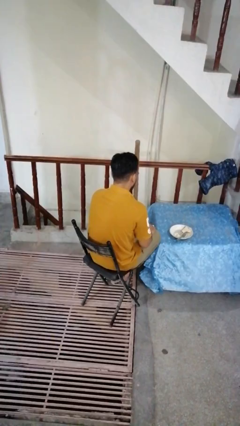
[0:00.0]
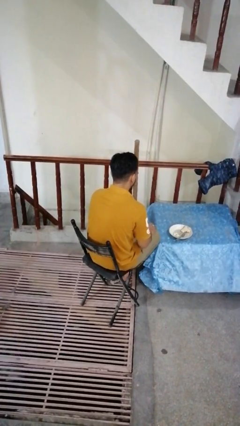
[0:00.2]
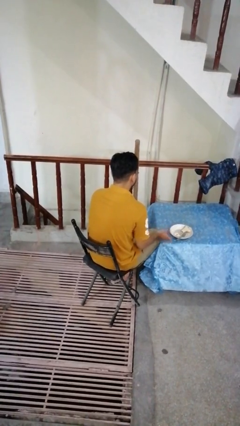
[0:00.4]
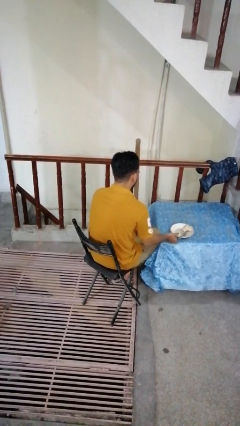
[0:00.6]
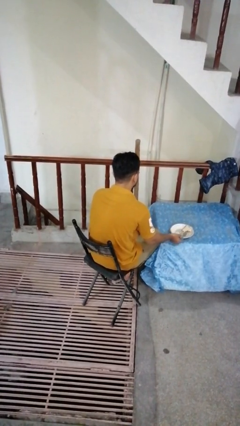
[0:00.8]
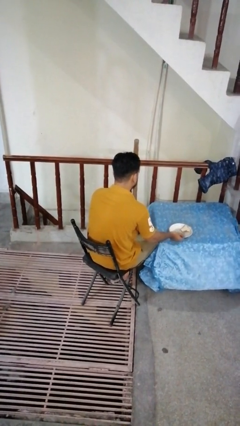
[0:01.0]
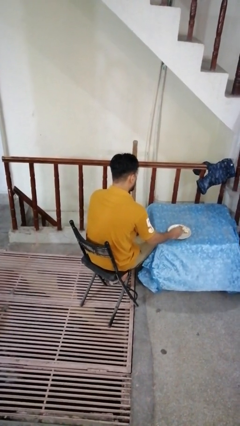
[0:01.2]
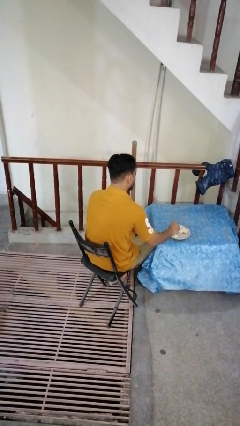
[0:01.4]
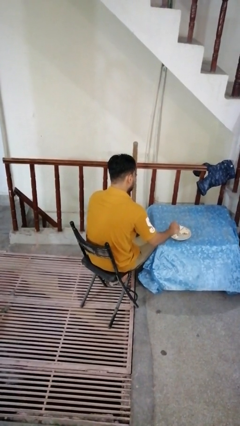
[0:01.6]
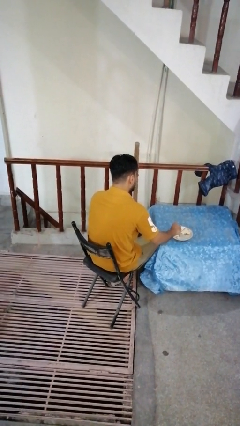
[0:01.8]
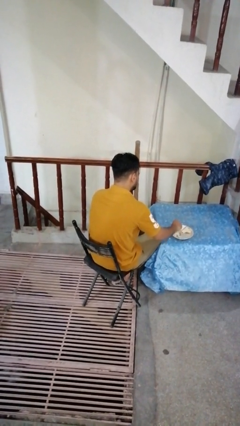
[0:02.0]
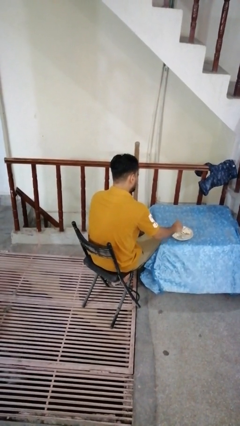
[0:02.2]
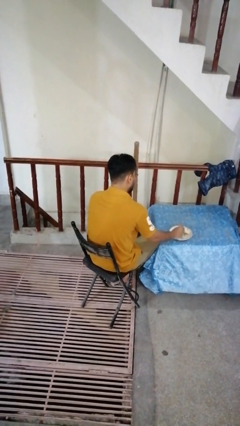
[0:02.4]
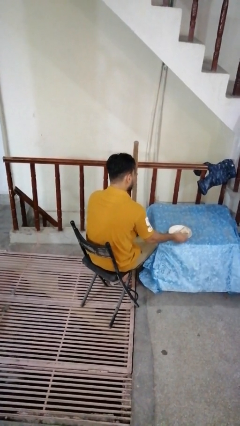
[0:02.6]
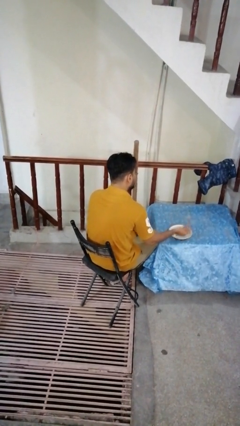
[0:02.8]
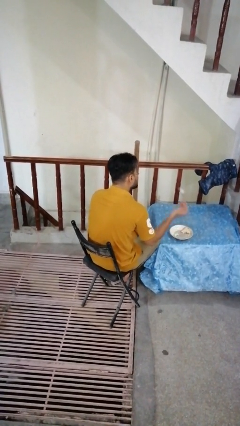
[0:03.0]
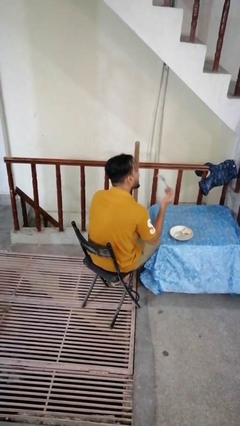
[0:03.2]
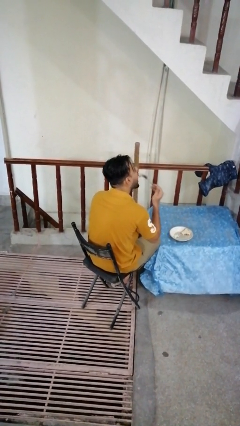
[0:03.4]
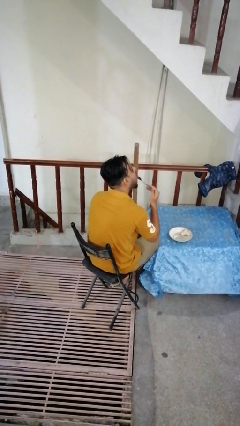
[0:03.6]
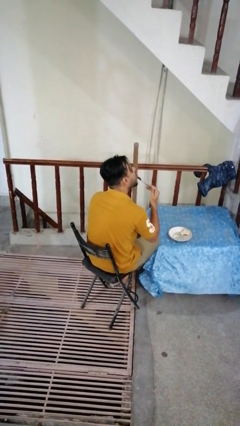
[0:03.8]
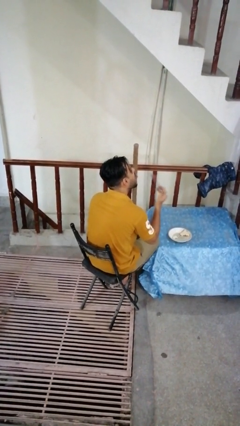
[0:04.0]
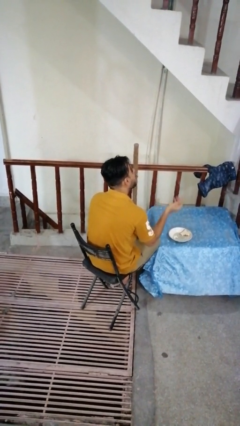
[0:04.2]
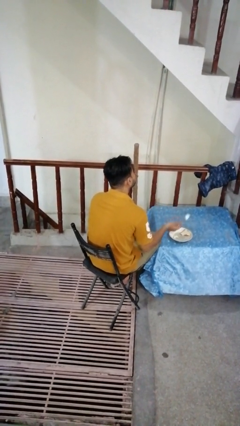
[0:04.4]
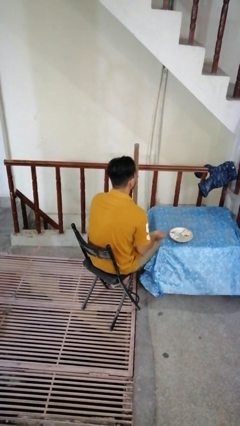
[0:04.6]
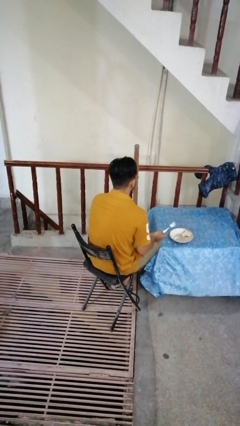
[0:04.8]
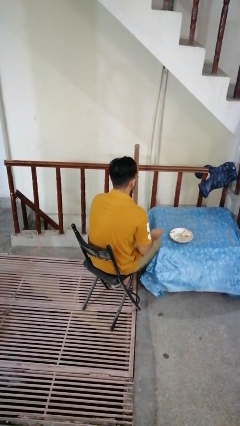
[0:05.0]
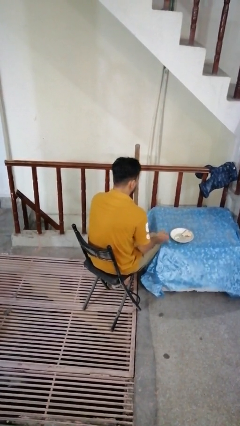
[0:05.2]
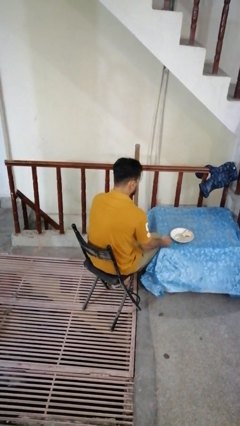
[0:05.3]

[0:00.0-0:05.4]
person eats with utensil

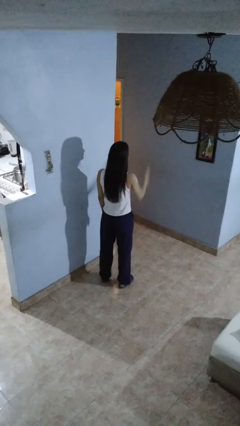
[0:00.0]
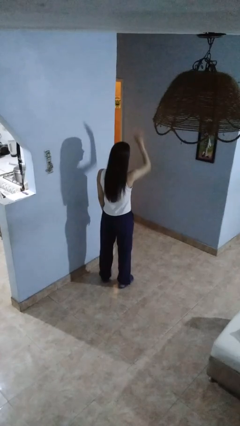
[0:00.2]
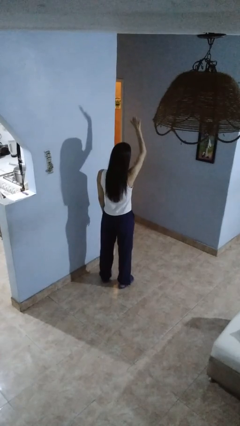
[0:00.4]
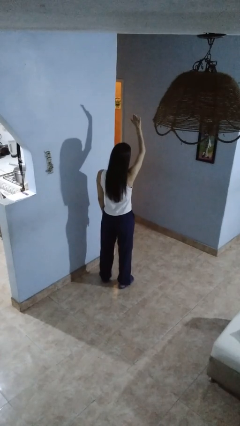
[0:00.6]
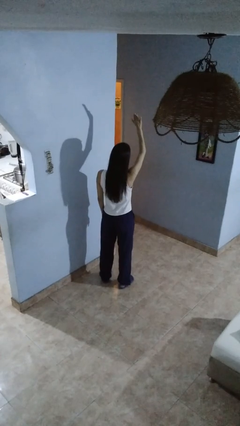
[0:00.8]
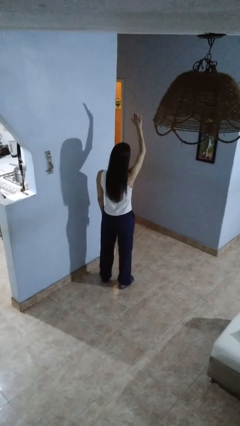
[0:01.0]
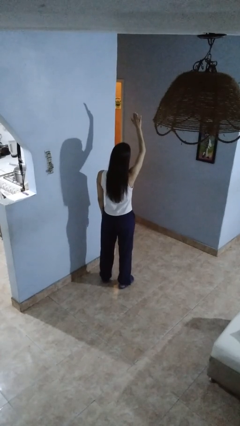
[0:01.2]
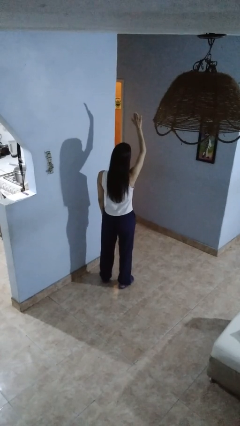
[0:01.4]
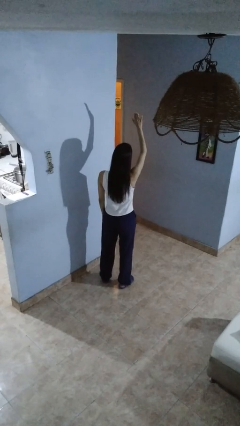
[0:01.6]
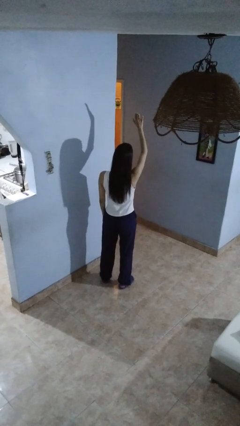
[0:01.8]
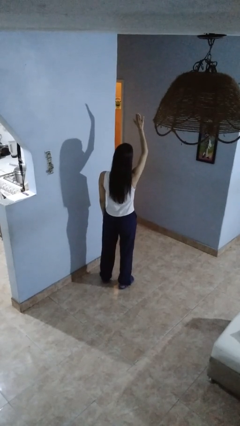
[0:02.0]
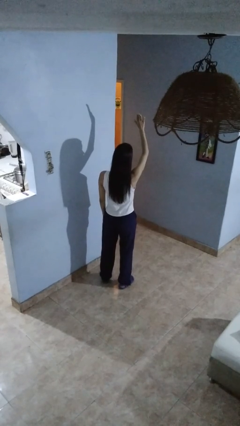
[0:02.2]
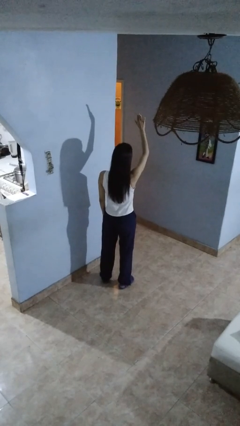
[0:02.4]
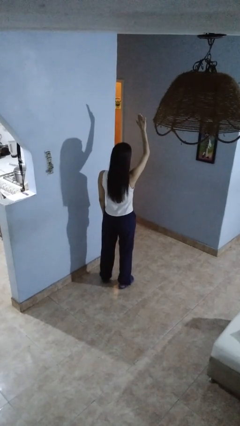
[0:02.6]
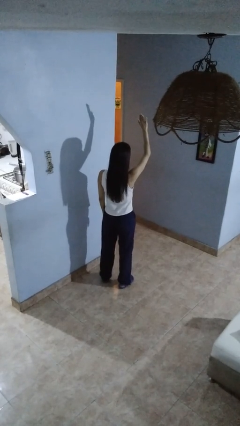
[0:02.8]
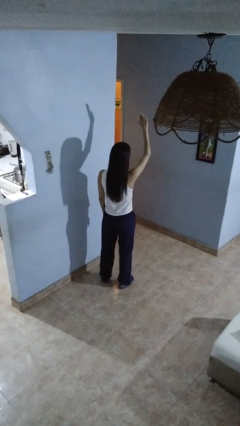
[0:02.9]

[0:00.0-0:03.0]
person gestures raise hand

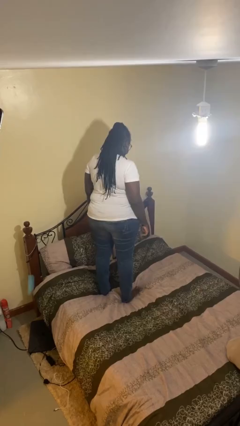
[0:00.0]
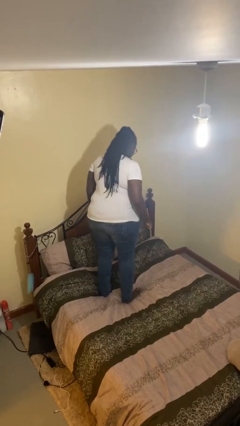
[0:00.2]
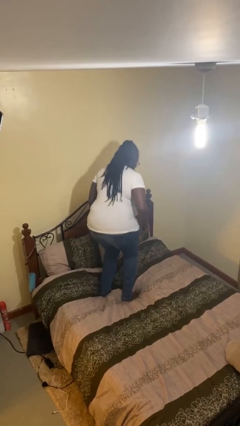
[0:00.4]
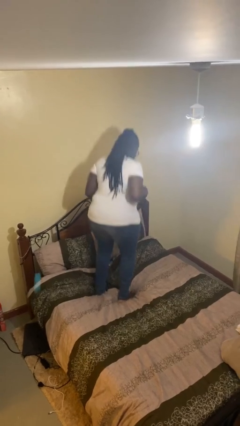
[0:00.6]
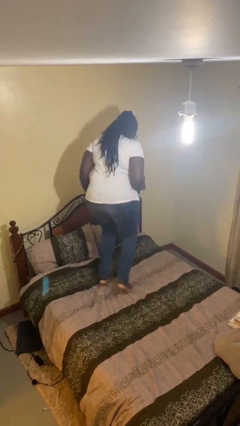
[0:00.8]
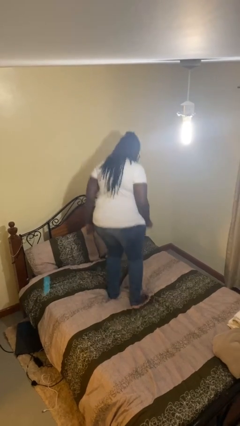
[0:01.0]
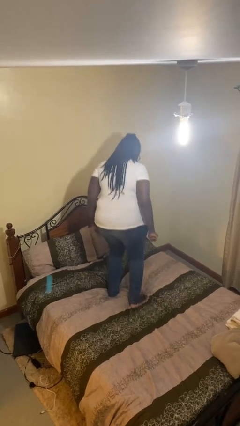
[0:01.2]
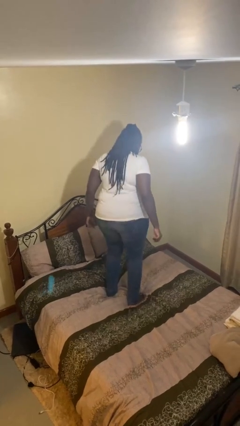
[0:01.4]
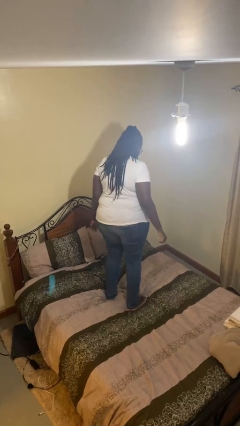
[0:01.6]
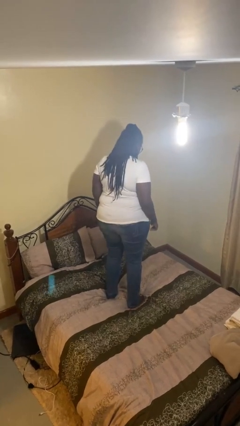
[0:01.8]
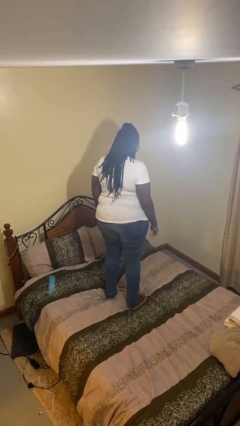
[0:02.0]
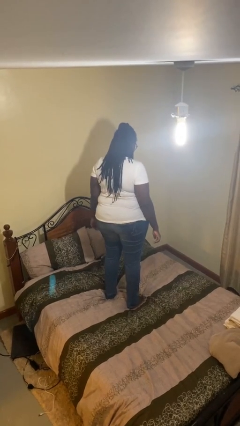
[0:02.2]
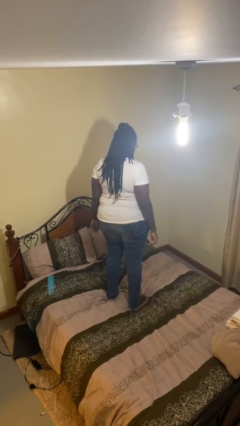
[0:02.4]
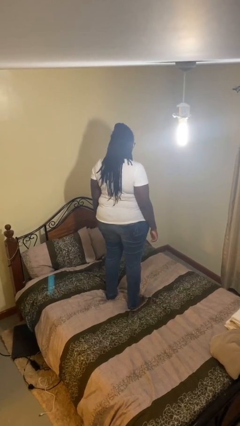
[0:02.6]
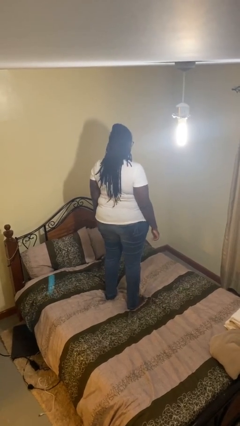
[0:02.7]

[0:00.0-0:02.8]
person jumps on bed

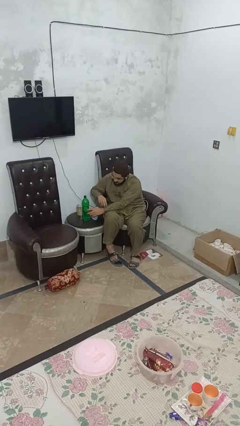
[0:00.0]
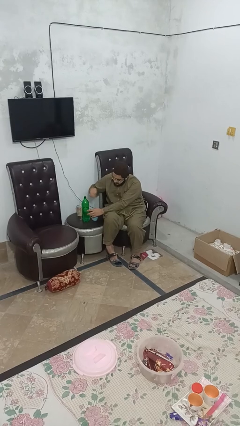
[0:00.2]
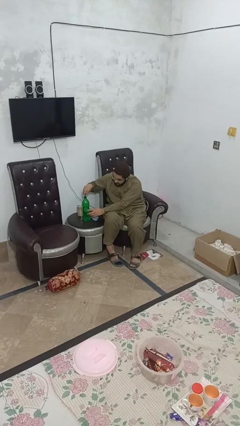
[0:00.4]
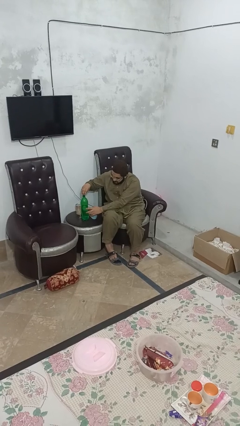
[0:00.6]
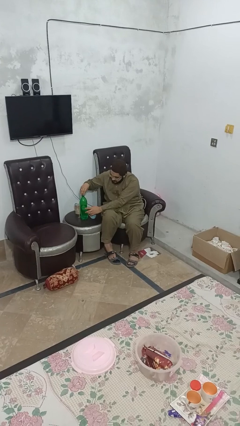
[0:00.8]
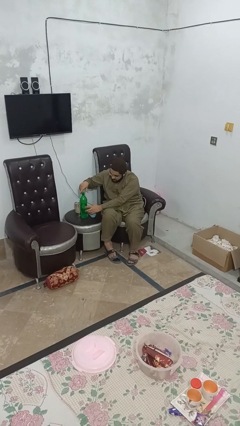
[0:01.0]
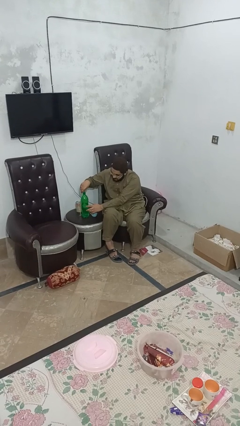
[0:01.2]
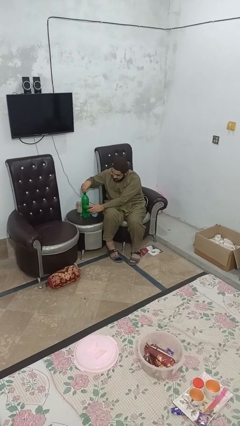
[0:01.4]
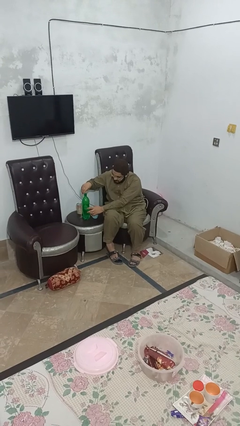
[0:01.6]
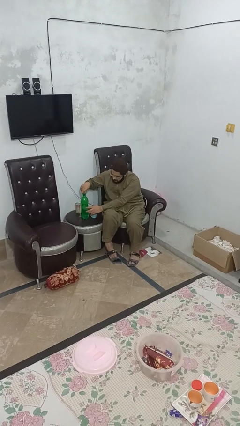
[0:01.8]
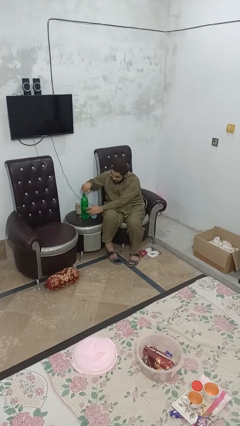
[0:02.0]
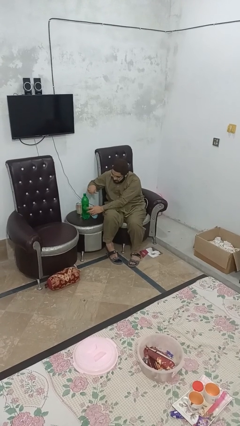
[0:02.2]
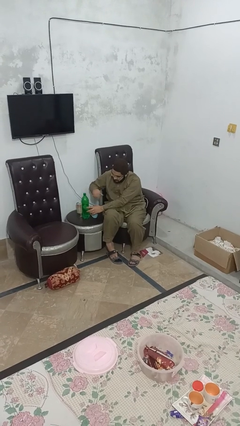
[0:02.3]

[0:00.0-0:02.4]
person screws lid to bottle

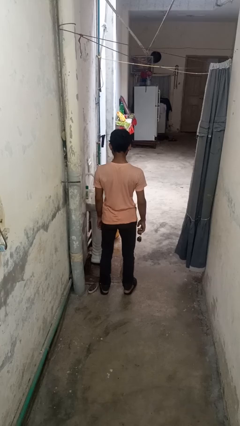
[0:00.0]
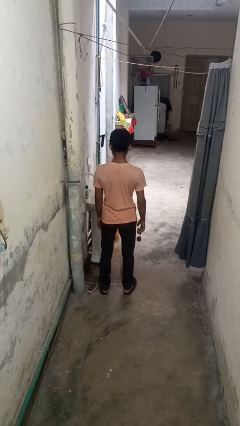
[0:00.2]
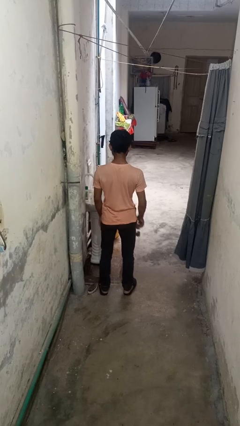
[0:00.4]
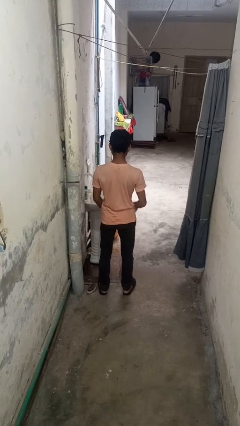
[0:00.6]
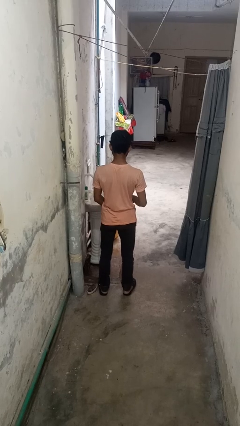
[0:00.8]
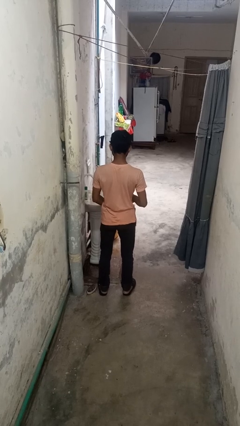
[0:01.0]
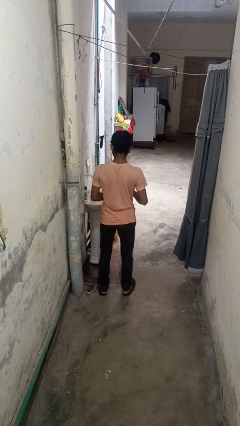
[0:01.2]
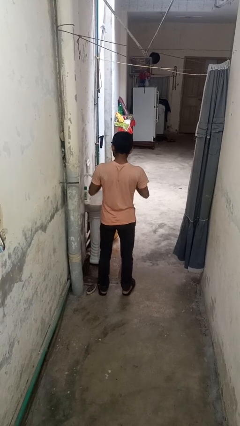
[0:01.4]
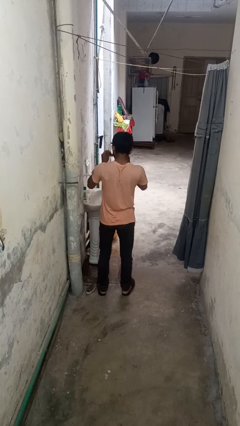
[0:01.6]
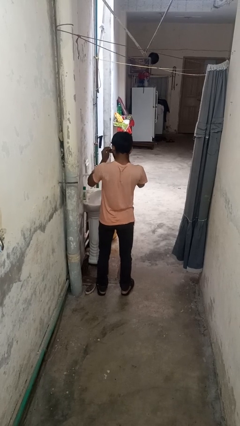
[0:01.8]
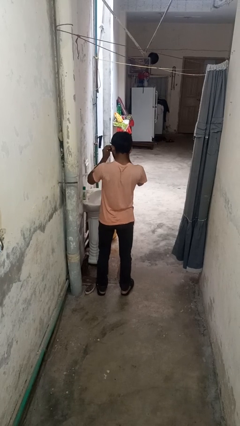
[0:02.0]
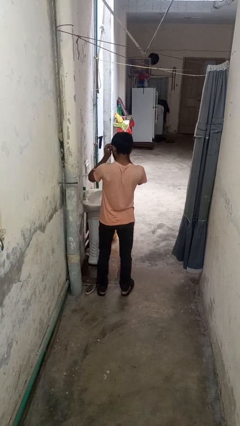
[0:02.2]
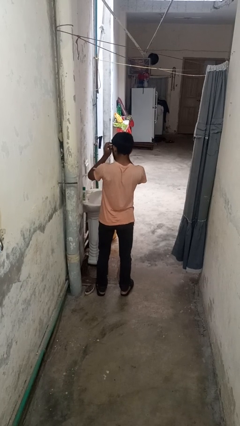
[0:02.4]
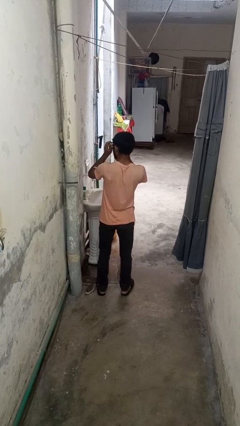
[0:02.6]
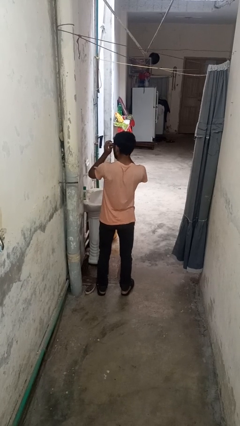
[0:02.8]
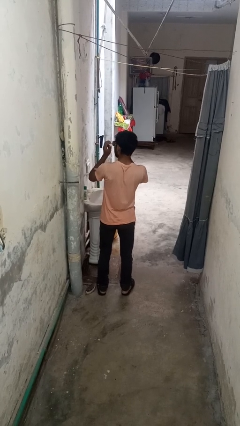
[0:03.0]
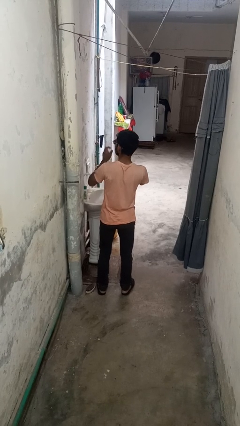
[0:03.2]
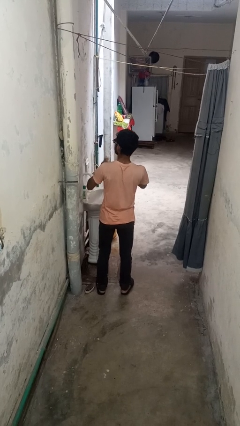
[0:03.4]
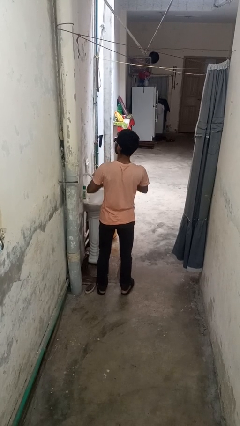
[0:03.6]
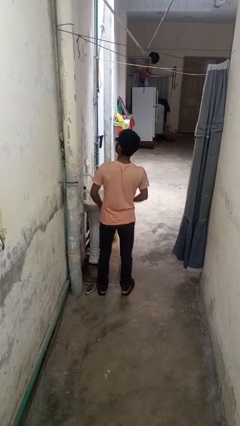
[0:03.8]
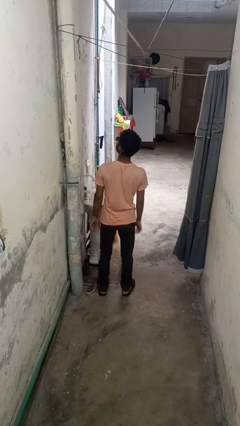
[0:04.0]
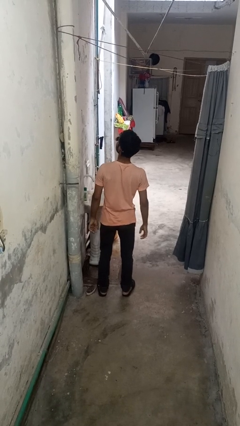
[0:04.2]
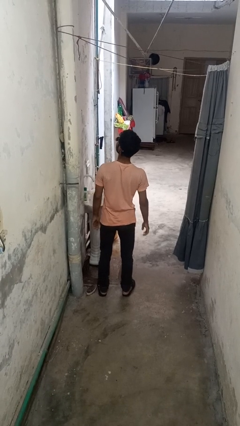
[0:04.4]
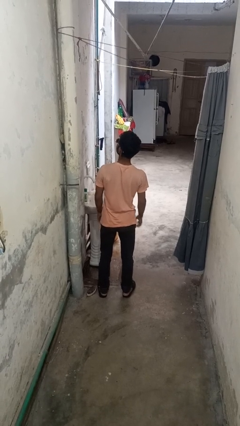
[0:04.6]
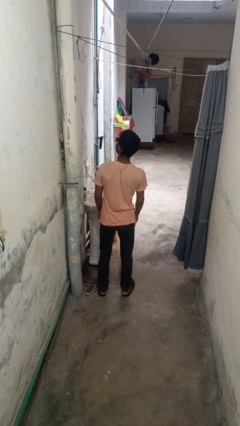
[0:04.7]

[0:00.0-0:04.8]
person puts on sunglasses
